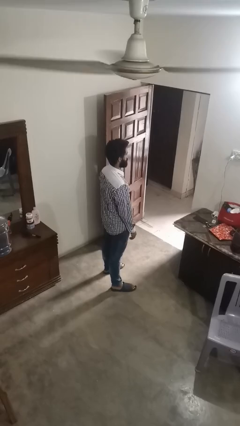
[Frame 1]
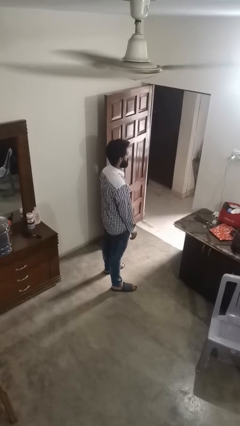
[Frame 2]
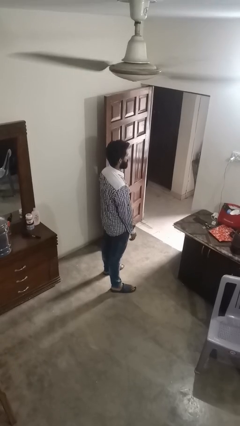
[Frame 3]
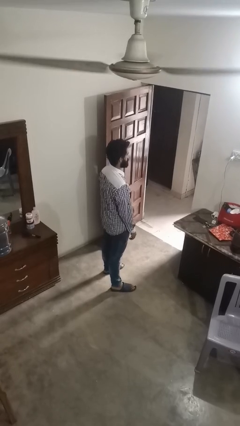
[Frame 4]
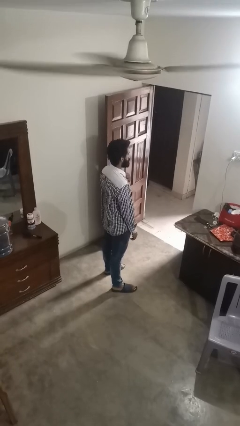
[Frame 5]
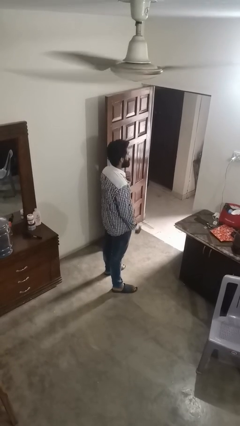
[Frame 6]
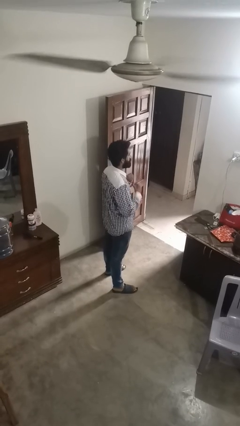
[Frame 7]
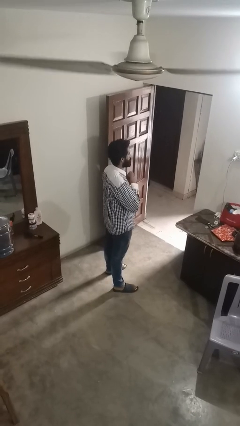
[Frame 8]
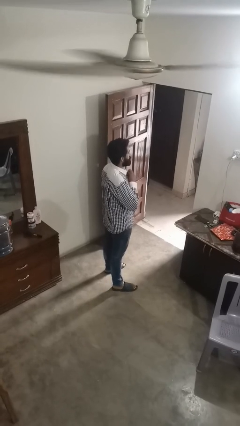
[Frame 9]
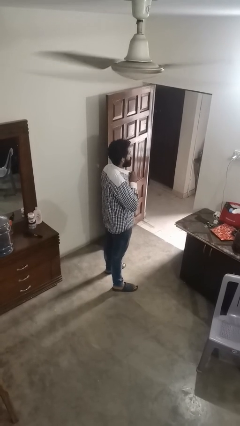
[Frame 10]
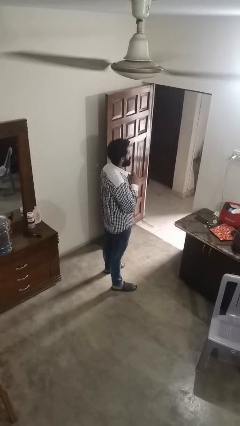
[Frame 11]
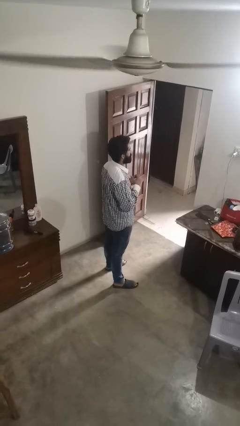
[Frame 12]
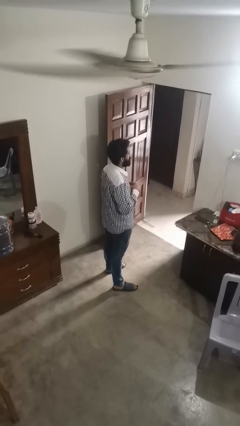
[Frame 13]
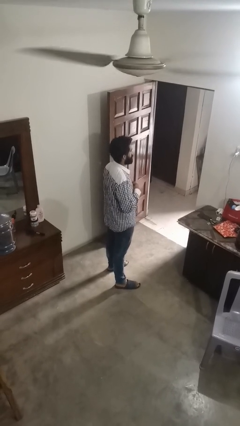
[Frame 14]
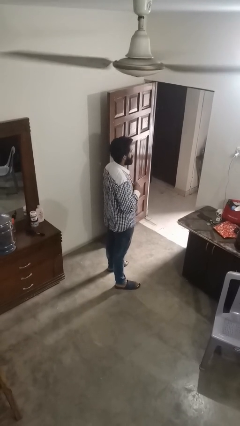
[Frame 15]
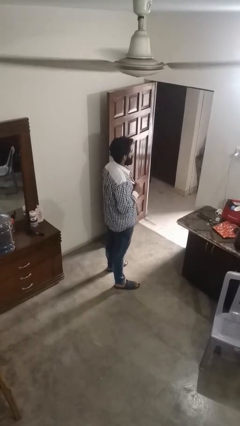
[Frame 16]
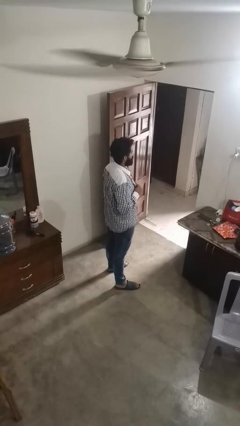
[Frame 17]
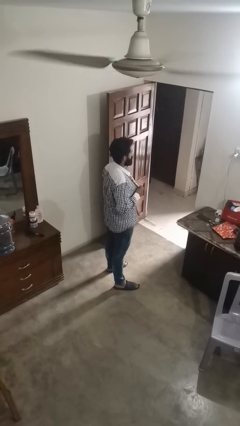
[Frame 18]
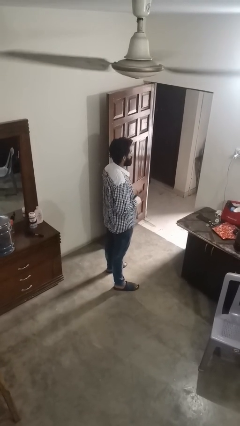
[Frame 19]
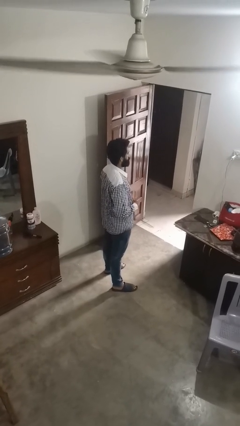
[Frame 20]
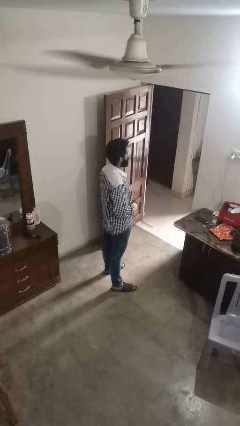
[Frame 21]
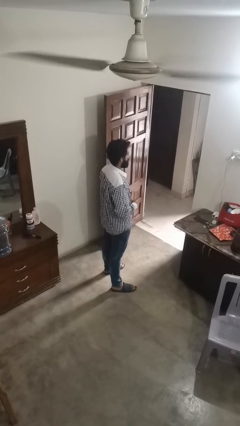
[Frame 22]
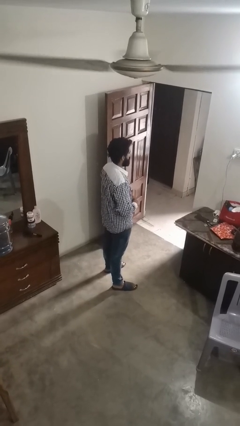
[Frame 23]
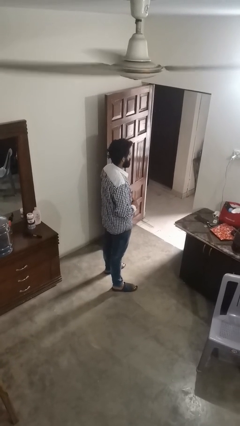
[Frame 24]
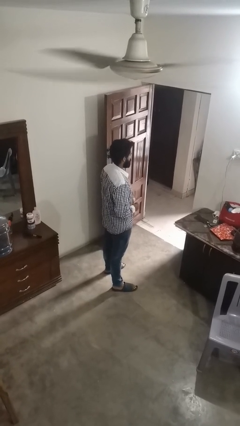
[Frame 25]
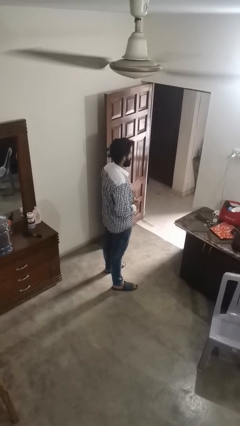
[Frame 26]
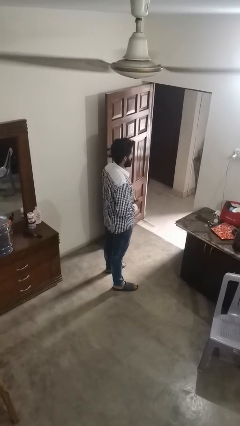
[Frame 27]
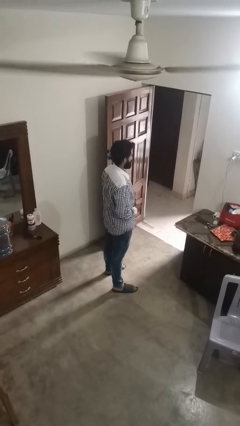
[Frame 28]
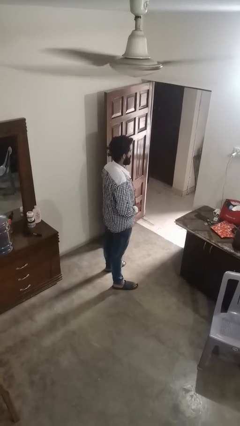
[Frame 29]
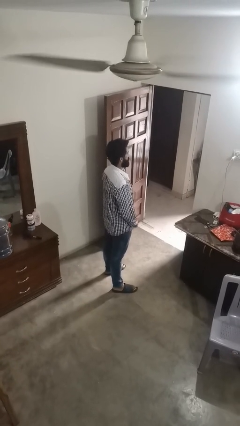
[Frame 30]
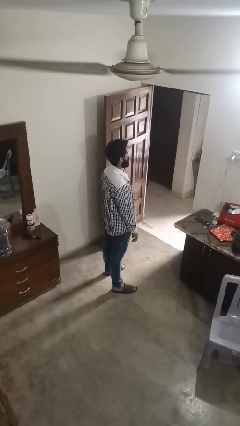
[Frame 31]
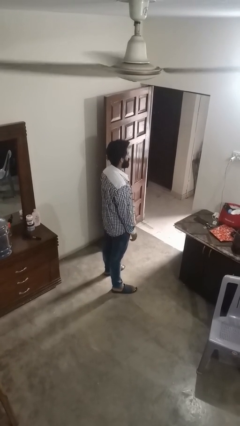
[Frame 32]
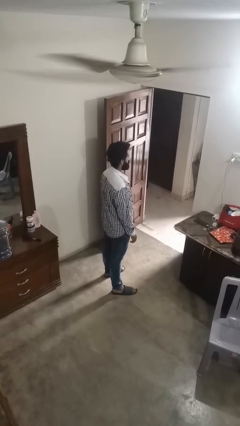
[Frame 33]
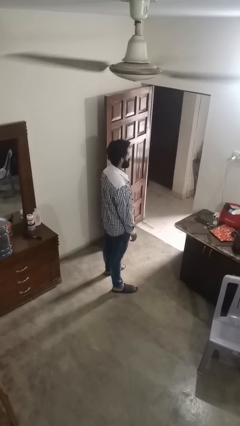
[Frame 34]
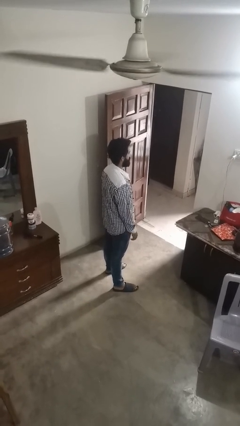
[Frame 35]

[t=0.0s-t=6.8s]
person unbuttons shirt

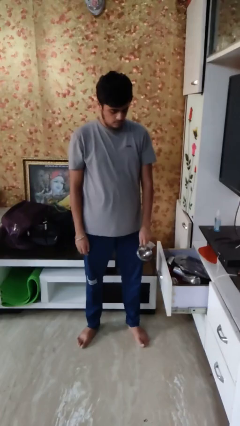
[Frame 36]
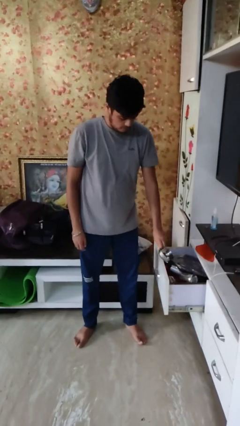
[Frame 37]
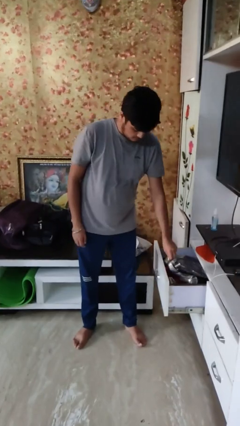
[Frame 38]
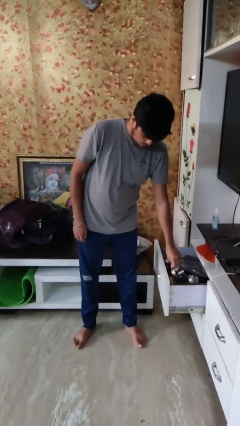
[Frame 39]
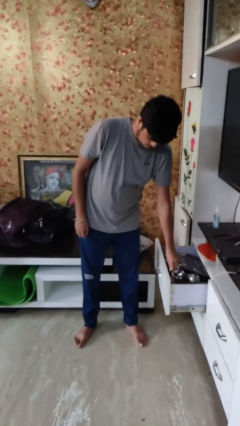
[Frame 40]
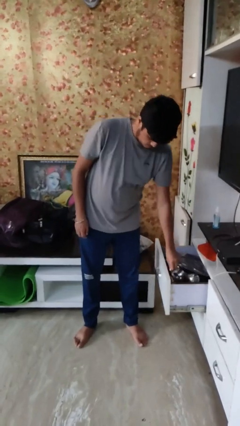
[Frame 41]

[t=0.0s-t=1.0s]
person puts object into kitchen drawer

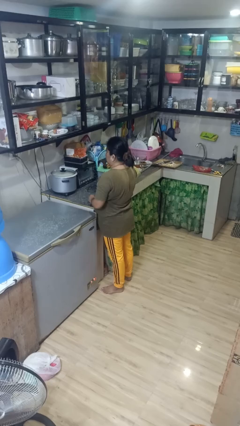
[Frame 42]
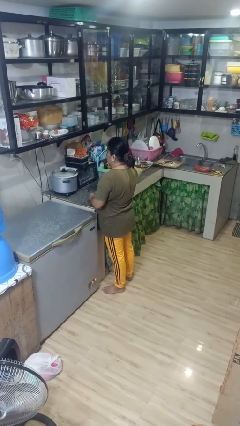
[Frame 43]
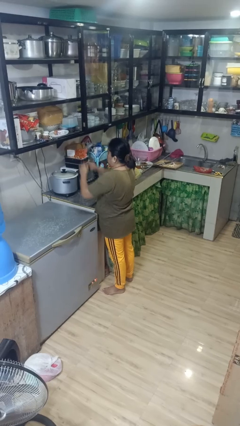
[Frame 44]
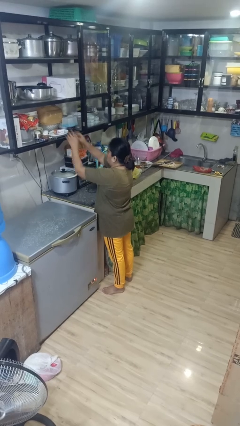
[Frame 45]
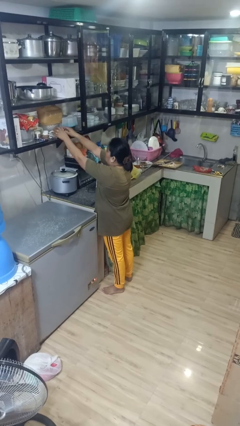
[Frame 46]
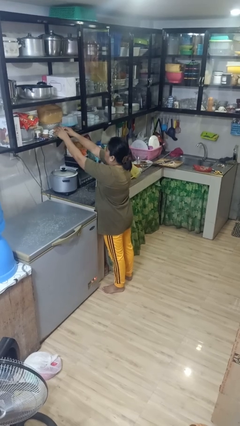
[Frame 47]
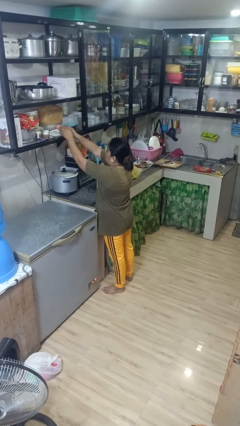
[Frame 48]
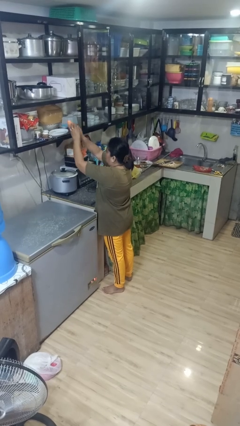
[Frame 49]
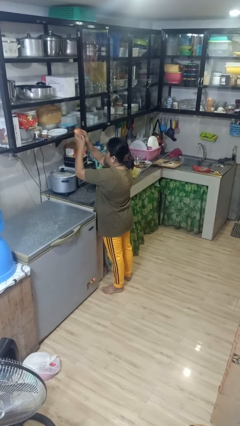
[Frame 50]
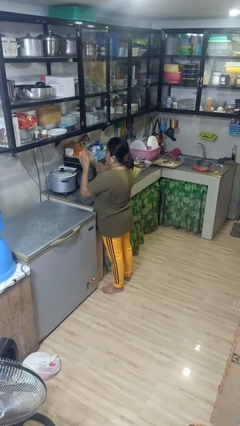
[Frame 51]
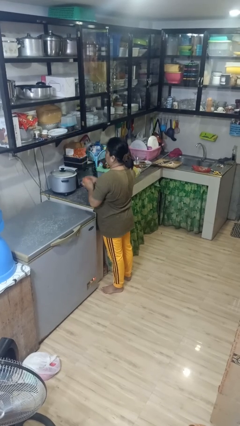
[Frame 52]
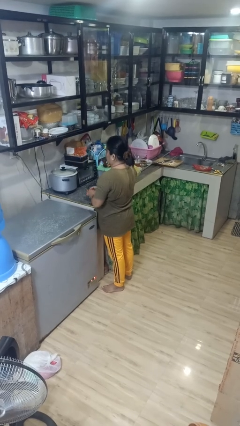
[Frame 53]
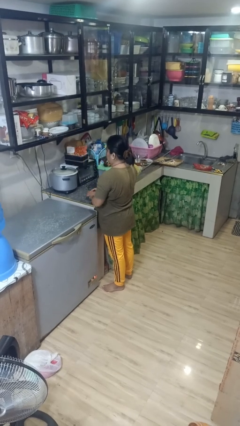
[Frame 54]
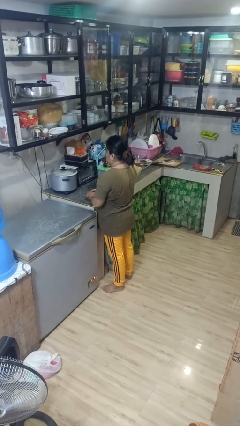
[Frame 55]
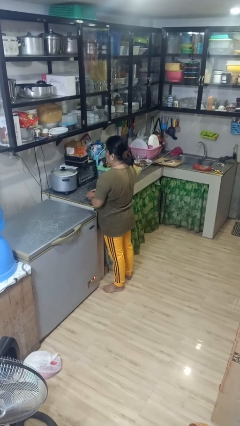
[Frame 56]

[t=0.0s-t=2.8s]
person takes object from cabinet

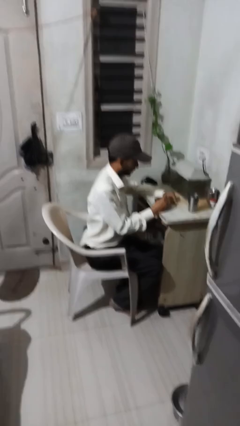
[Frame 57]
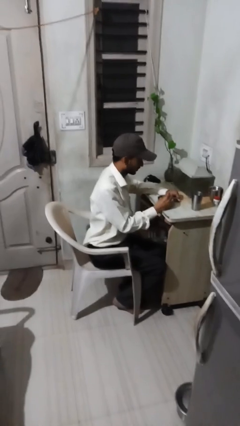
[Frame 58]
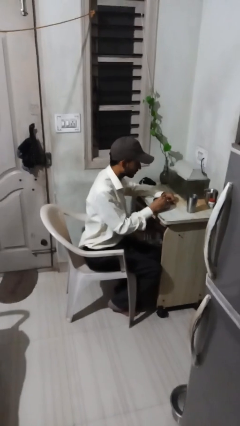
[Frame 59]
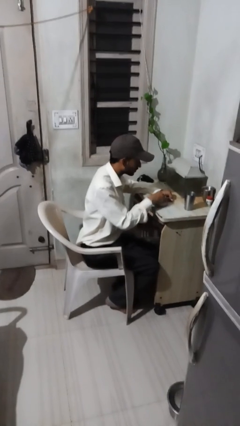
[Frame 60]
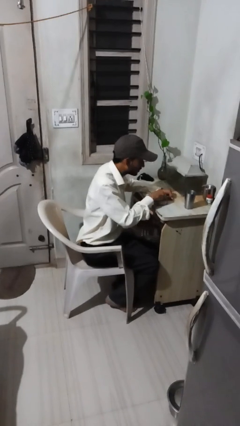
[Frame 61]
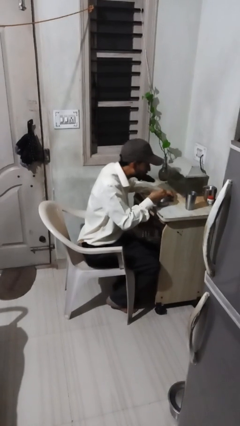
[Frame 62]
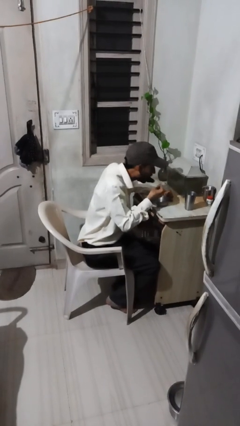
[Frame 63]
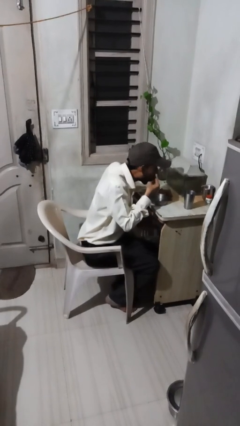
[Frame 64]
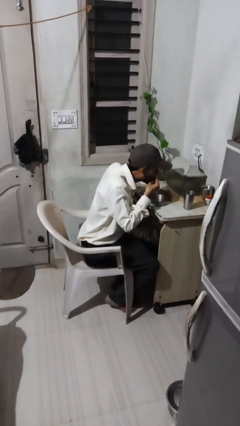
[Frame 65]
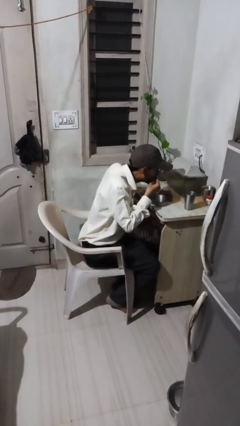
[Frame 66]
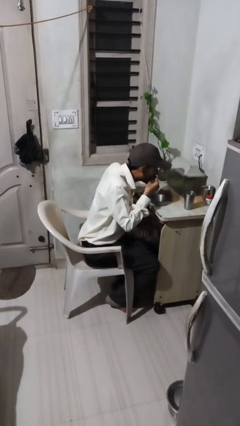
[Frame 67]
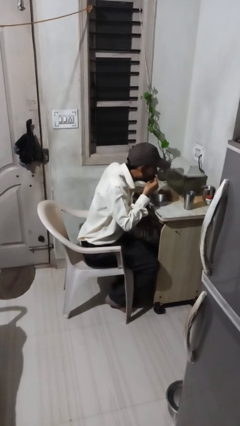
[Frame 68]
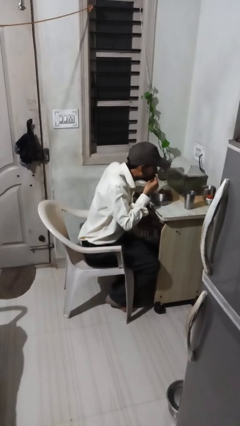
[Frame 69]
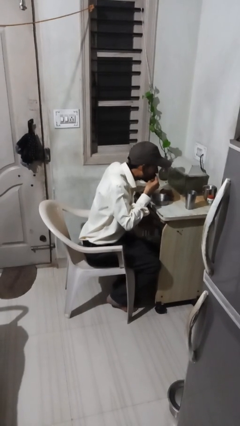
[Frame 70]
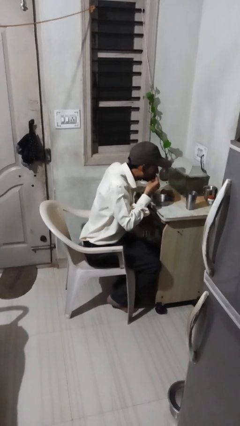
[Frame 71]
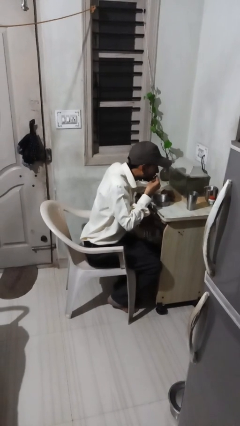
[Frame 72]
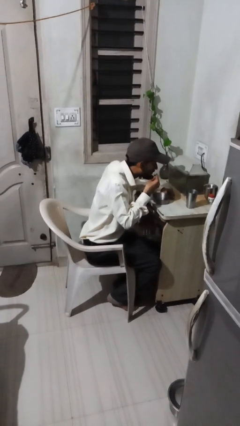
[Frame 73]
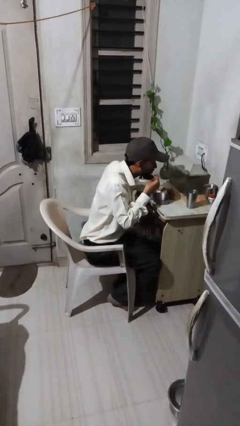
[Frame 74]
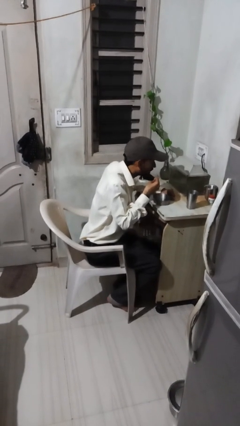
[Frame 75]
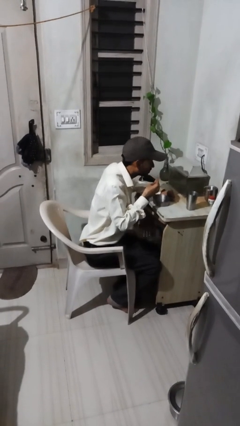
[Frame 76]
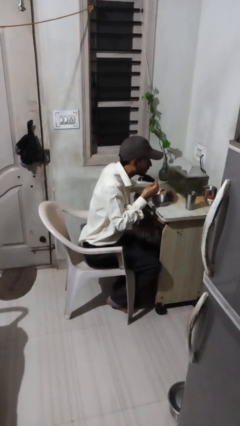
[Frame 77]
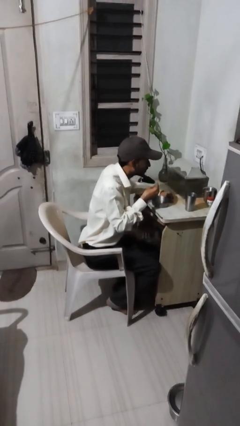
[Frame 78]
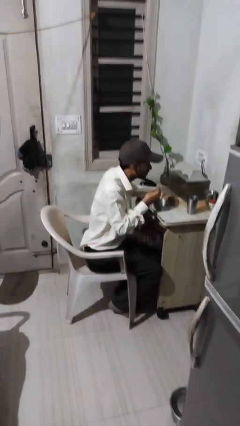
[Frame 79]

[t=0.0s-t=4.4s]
person eats with hands

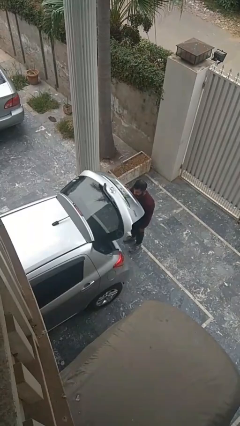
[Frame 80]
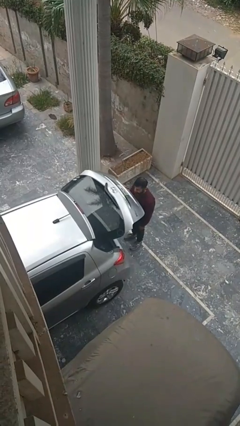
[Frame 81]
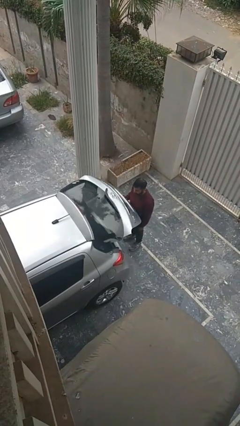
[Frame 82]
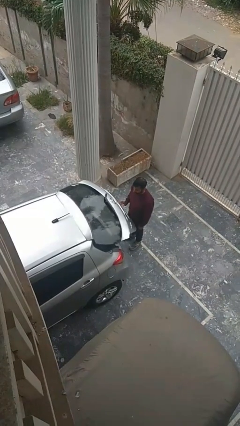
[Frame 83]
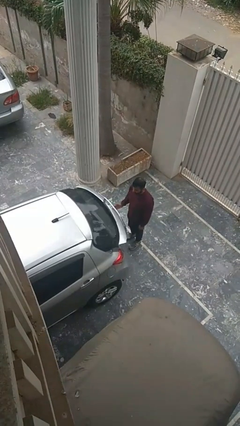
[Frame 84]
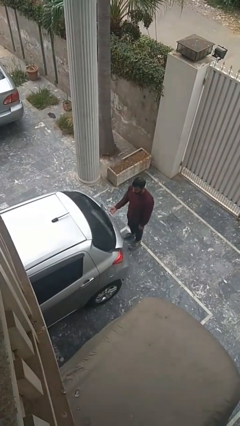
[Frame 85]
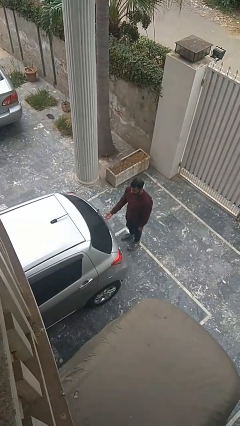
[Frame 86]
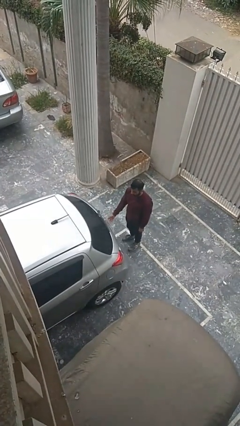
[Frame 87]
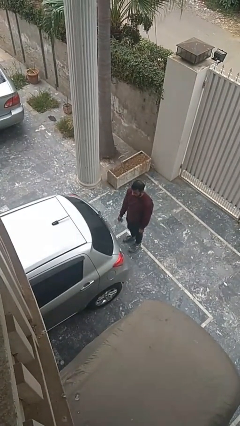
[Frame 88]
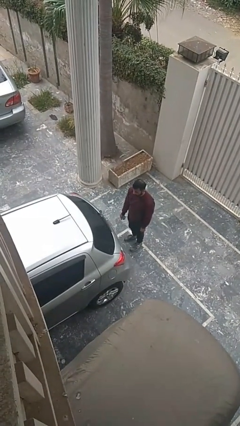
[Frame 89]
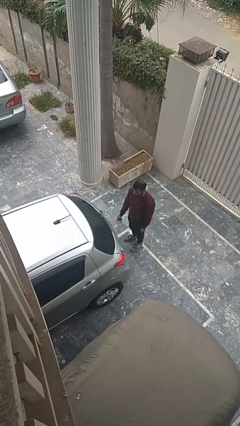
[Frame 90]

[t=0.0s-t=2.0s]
person closes car trunk
